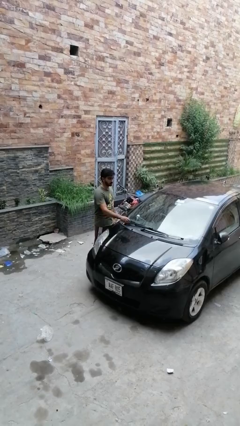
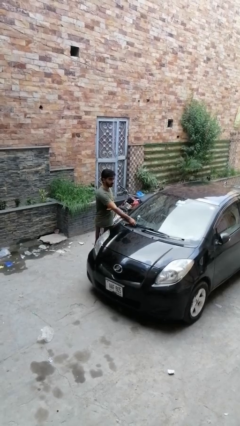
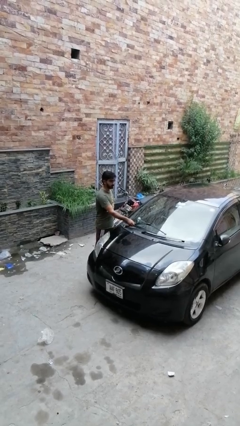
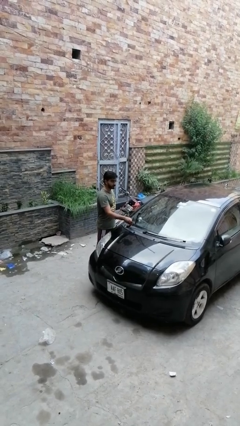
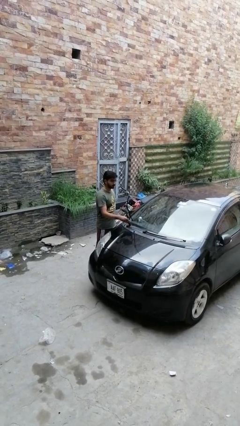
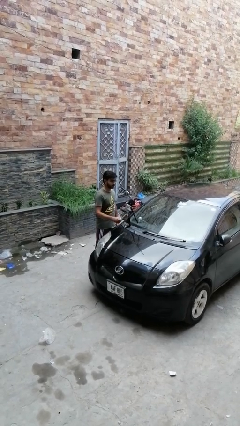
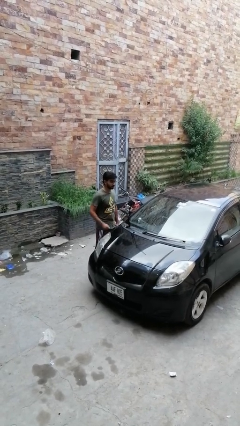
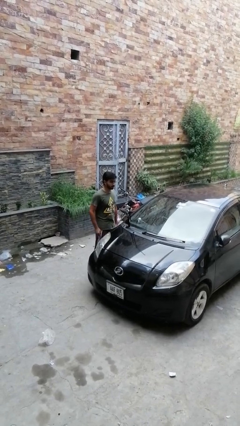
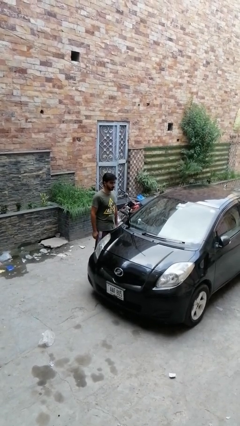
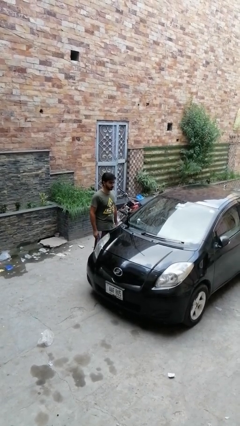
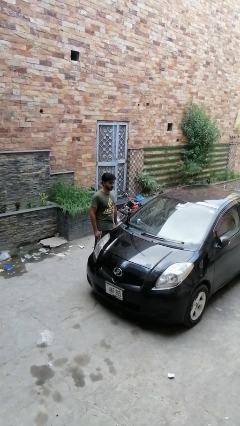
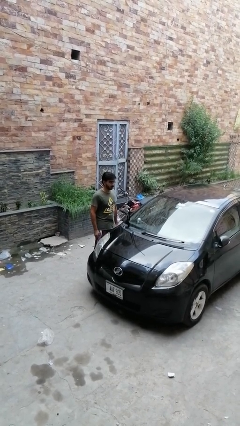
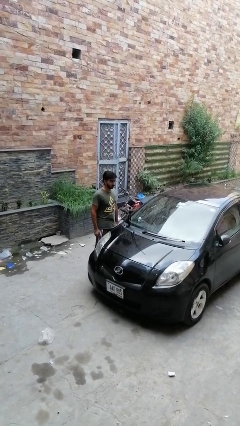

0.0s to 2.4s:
person flips up car wipers

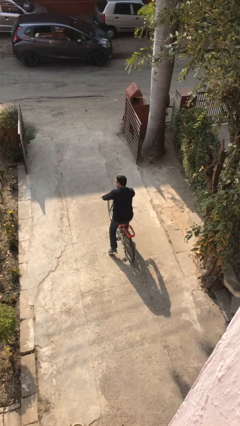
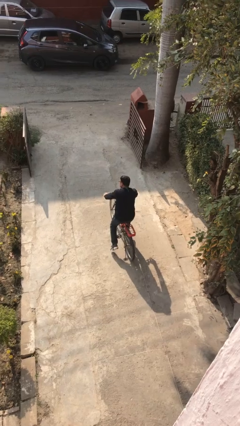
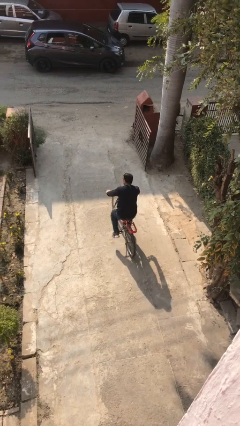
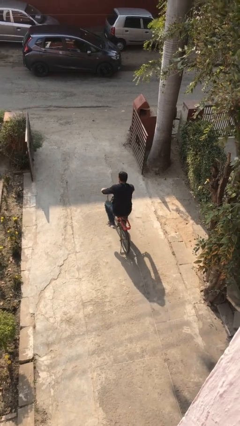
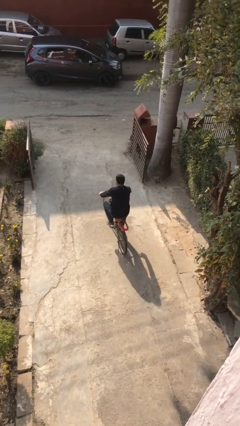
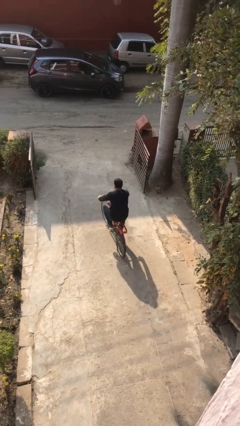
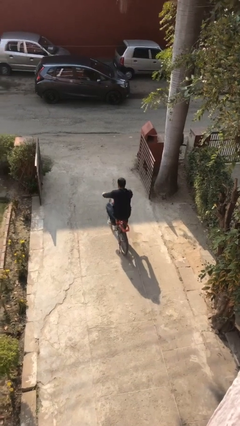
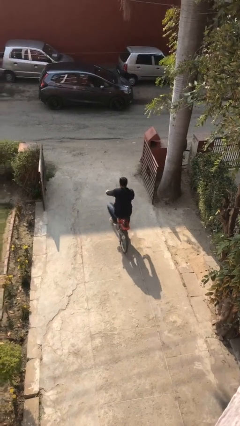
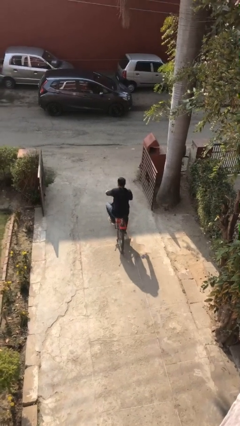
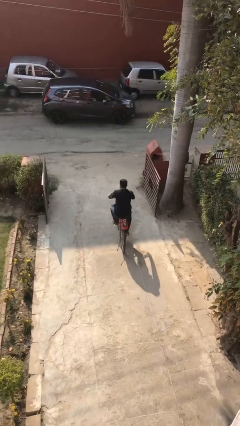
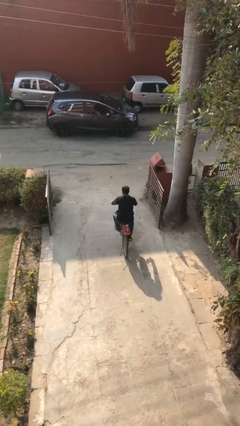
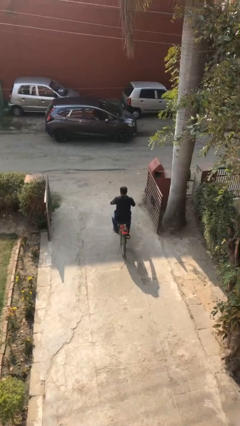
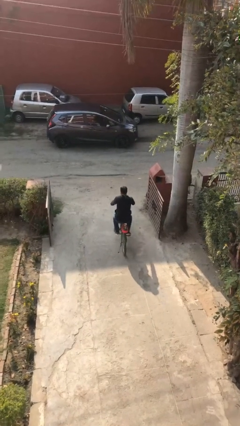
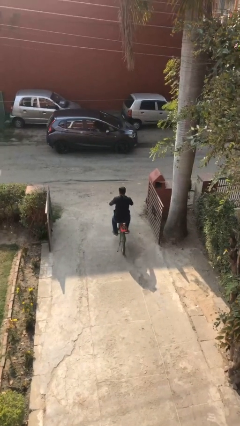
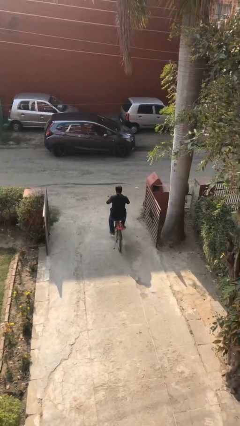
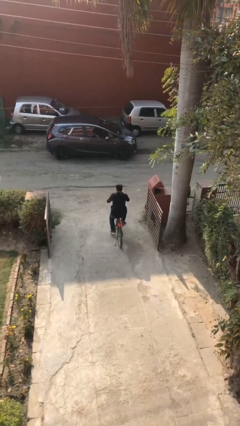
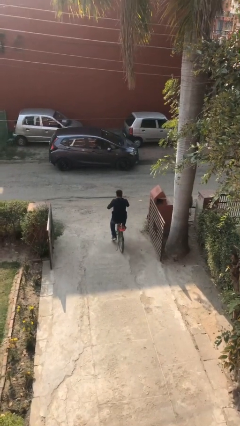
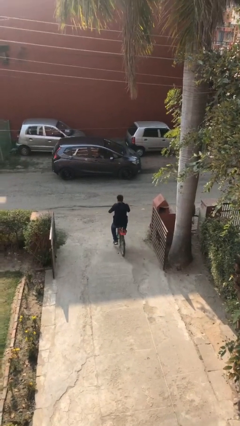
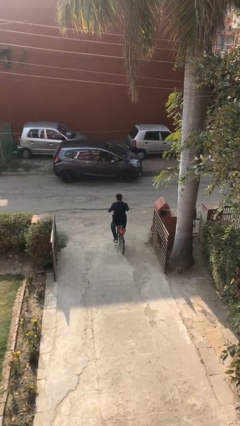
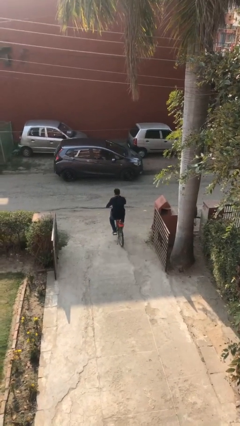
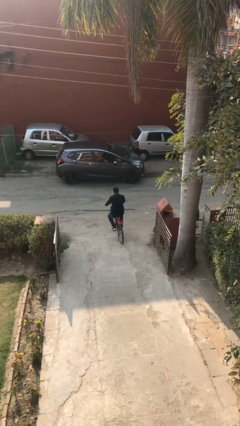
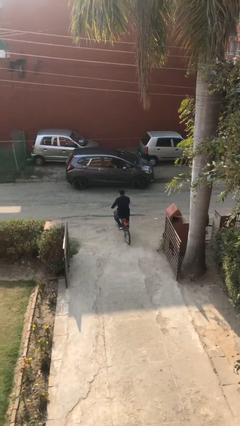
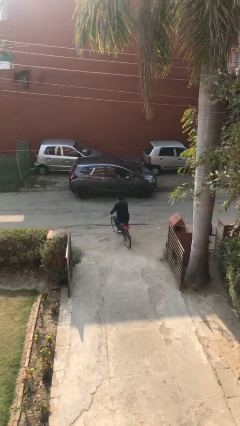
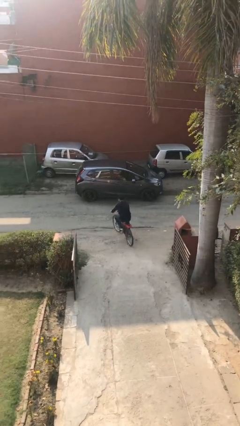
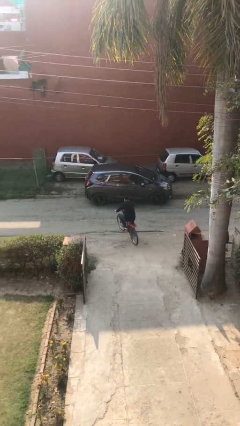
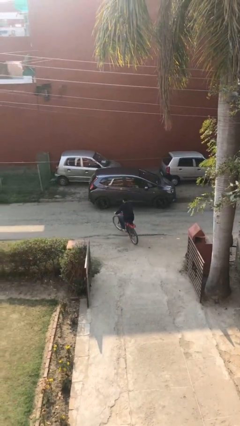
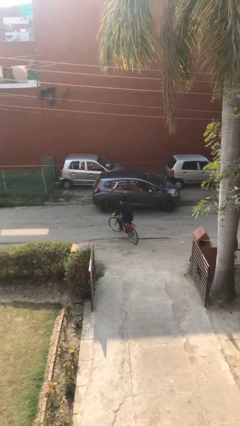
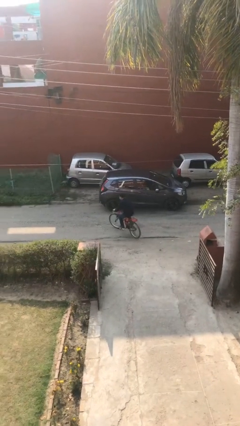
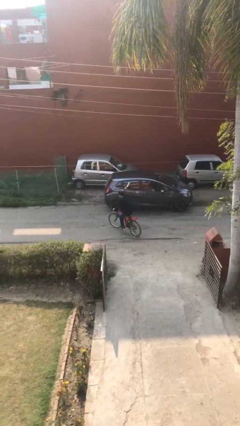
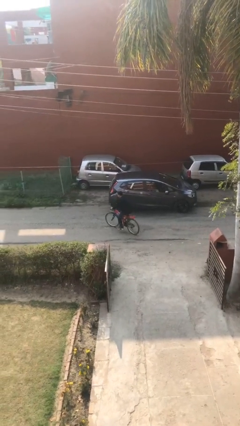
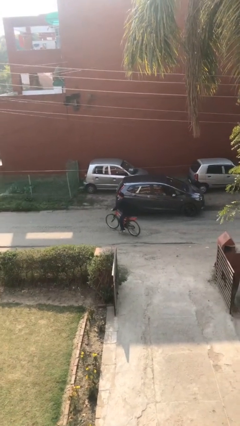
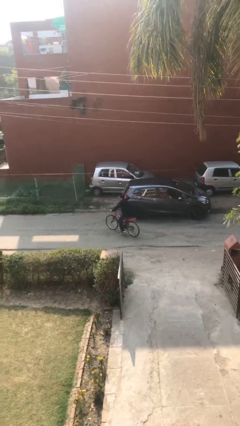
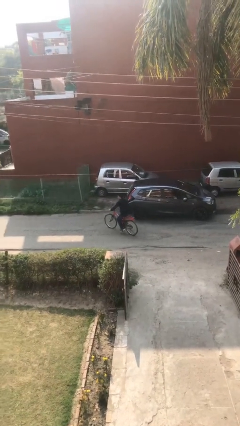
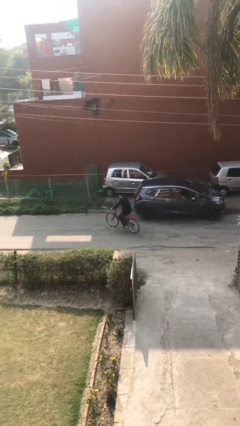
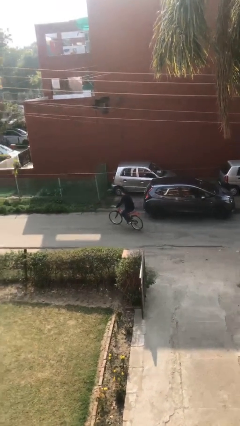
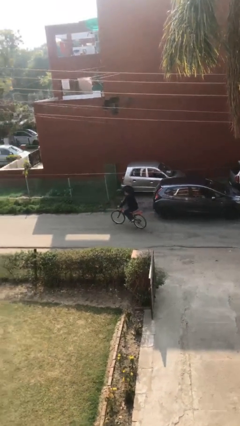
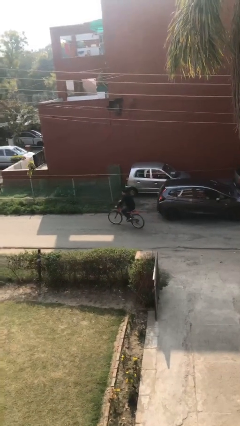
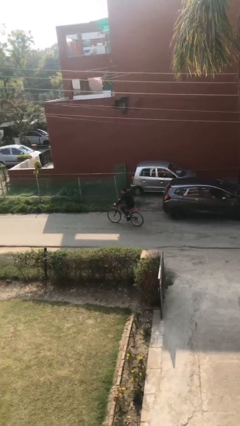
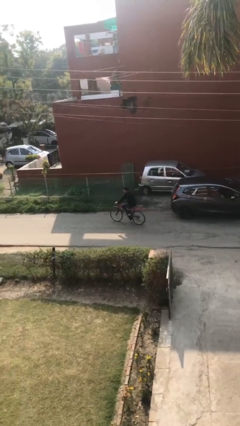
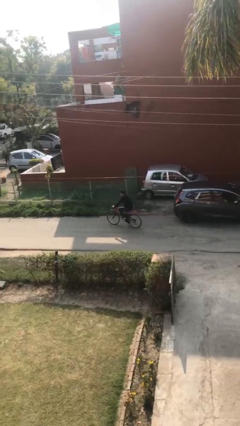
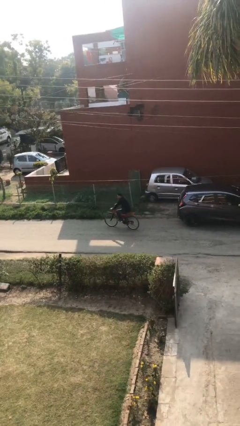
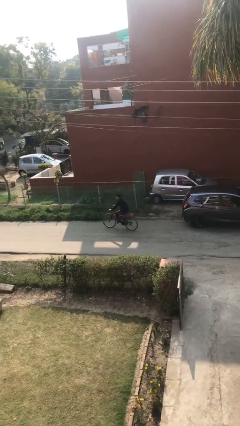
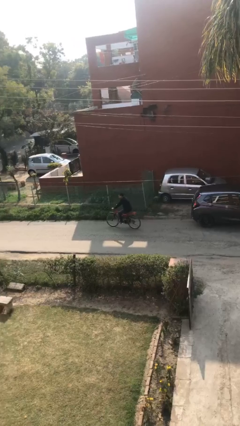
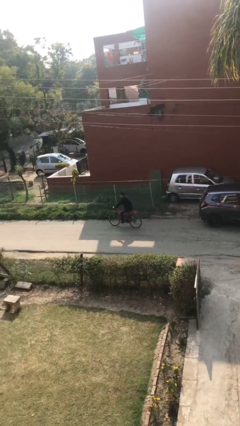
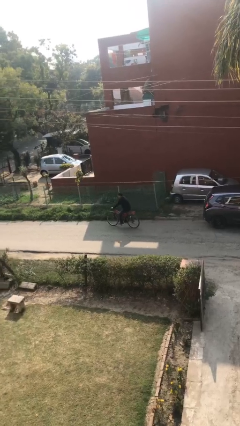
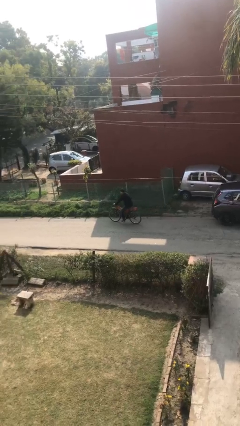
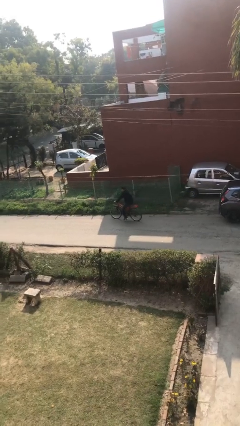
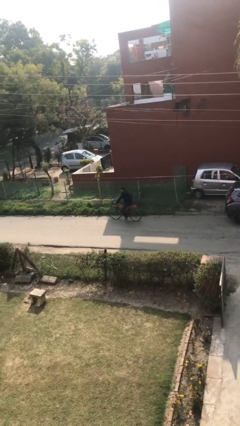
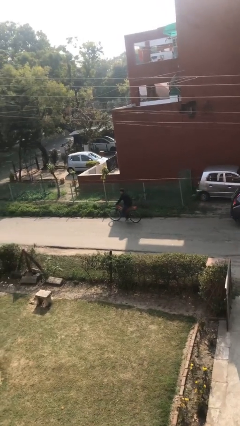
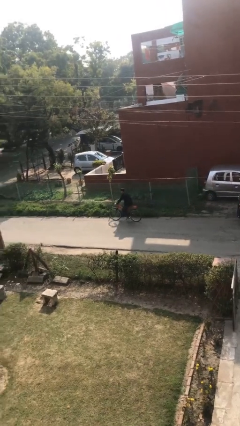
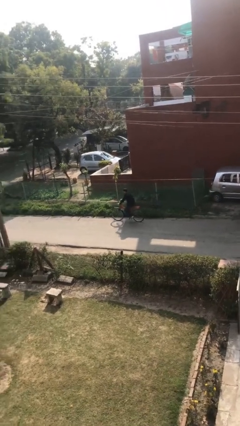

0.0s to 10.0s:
person rides bicycle

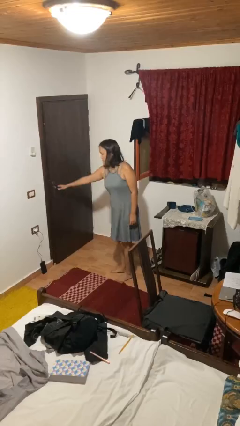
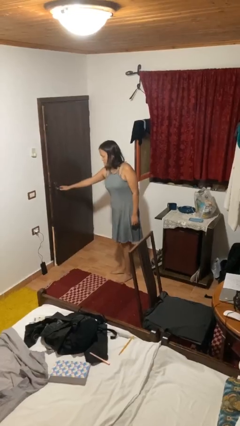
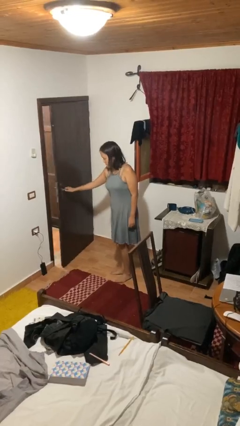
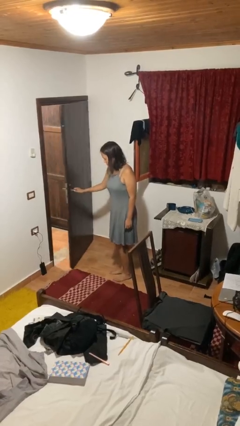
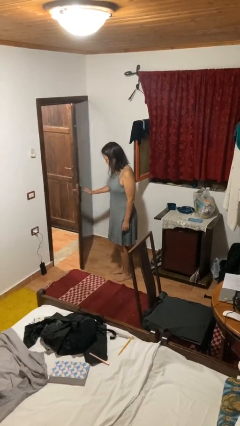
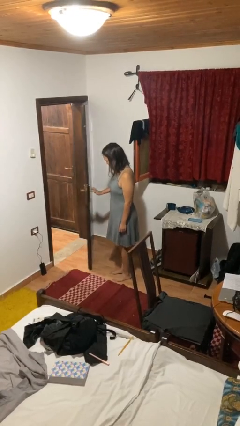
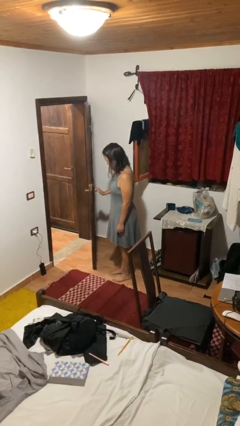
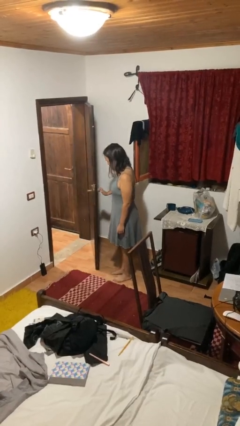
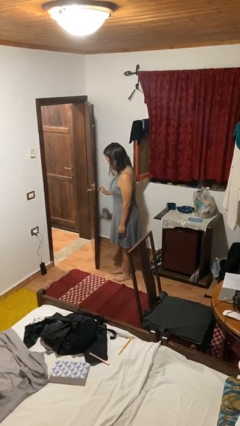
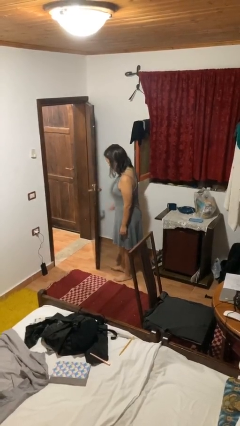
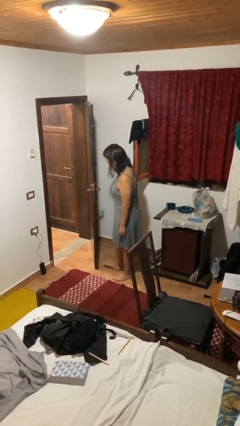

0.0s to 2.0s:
person opens facility door

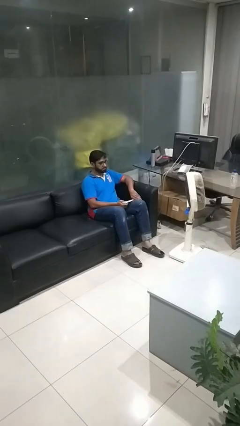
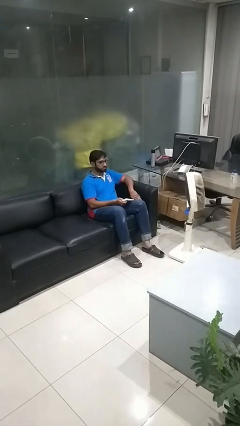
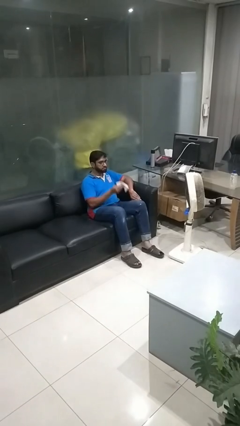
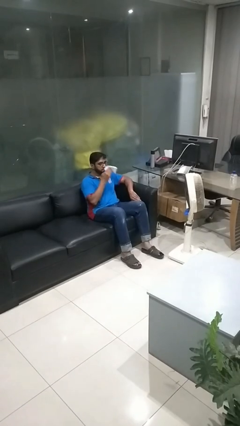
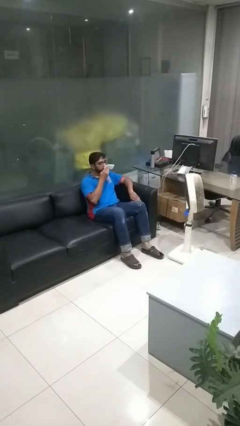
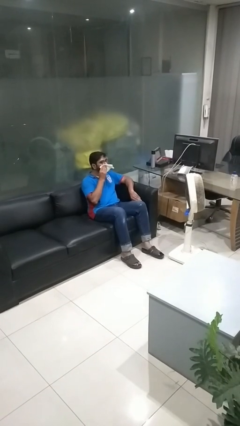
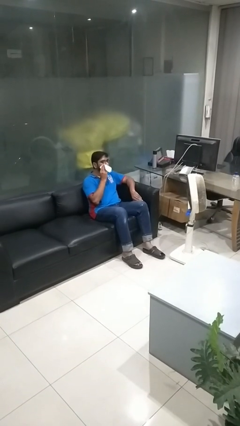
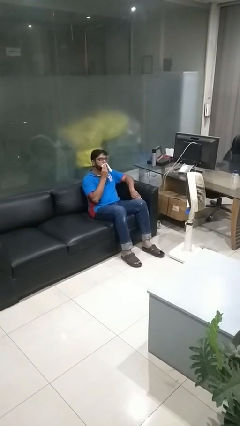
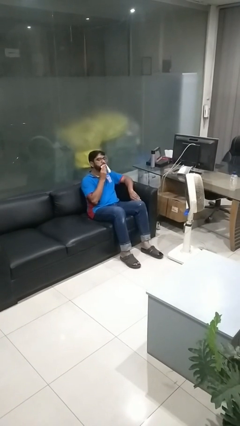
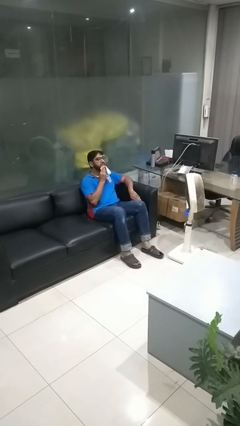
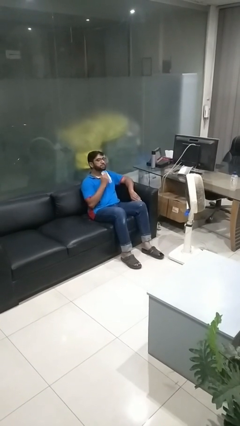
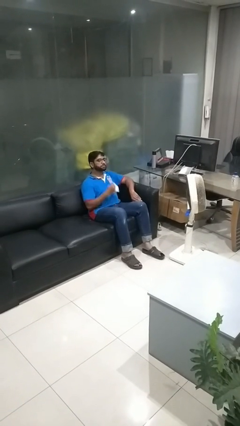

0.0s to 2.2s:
person wipes mouth with napkin

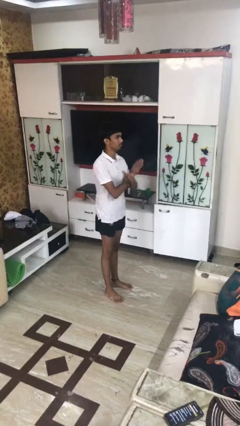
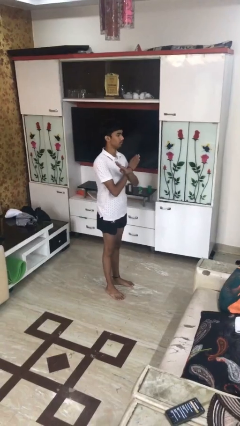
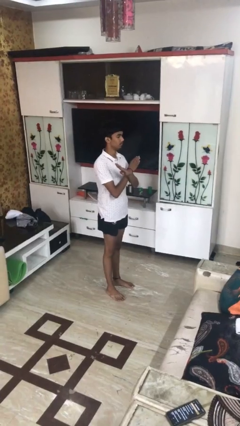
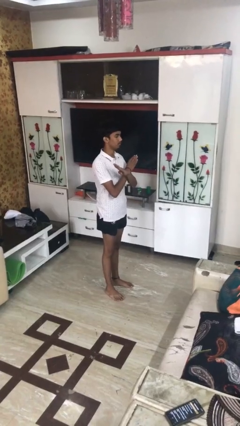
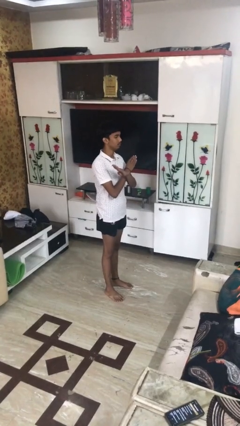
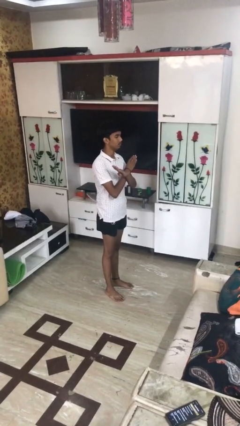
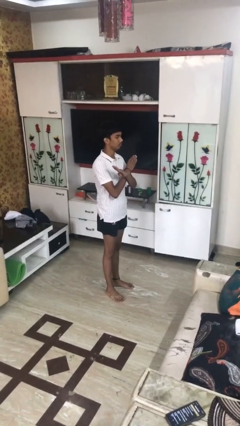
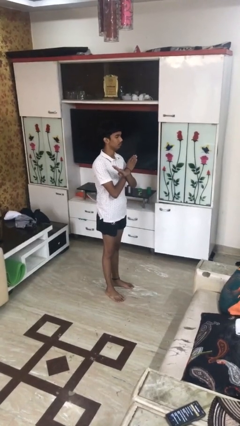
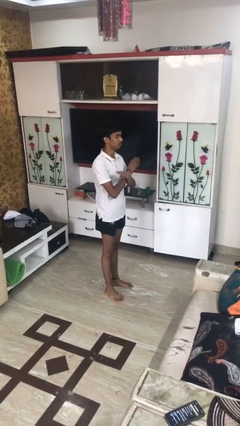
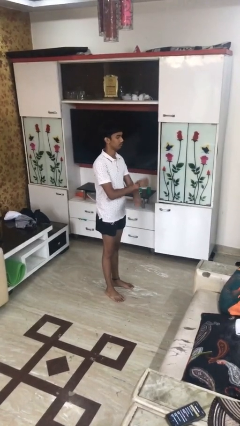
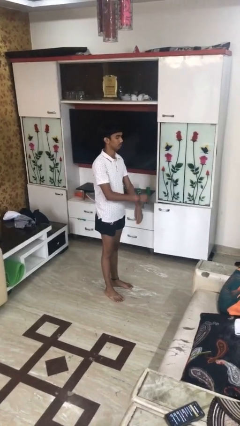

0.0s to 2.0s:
person gestures arms x
